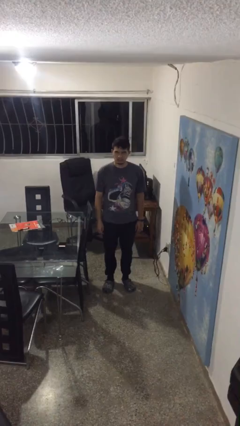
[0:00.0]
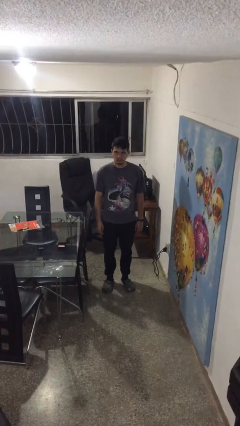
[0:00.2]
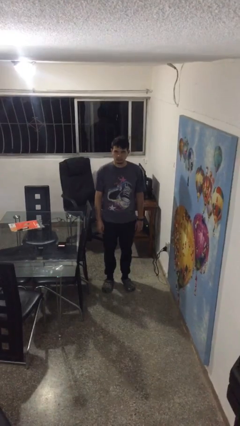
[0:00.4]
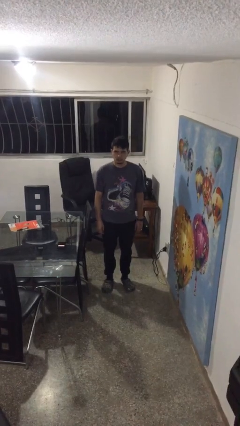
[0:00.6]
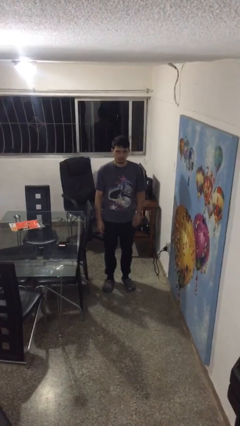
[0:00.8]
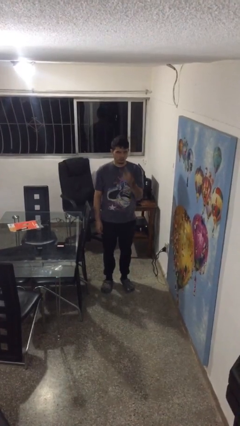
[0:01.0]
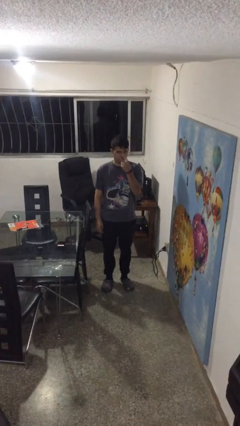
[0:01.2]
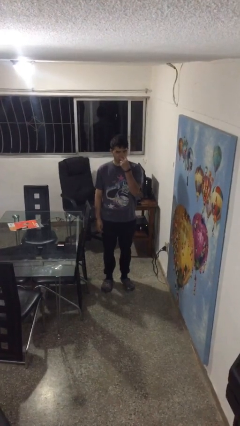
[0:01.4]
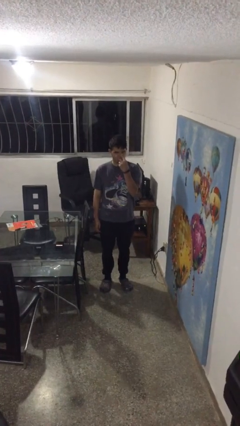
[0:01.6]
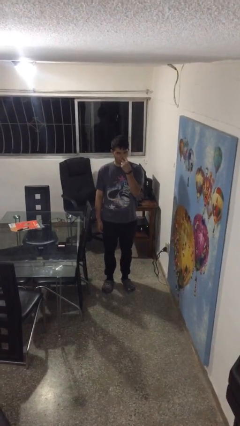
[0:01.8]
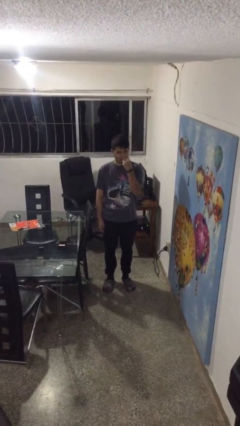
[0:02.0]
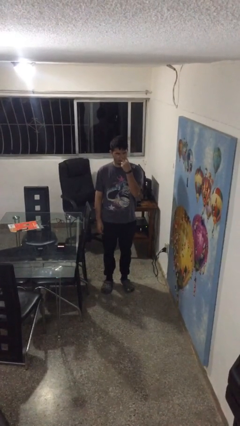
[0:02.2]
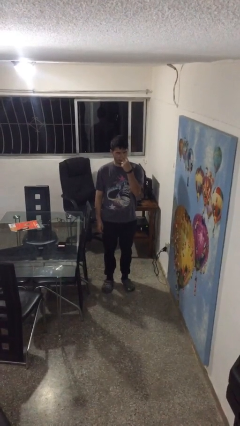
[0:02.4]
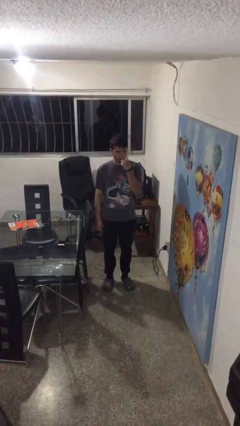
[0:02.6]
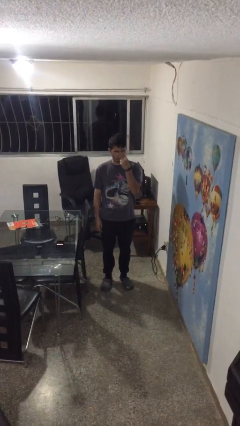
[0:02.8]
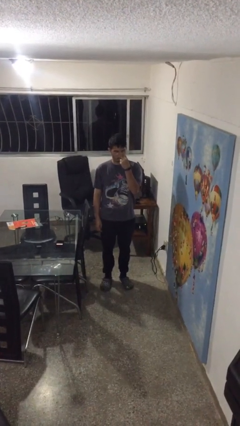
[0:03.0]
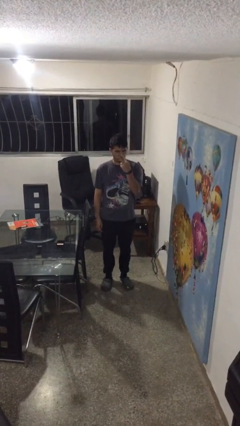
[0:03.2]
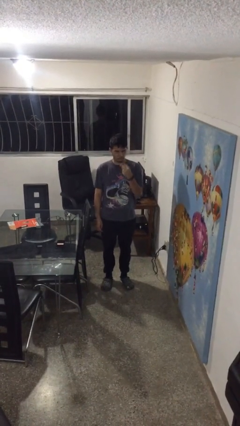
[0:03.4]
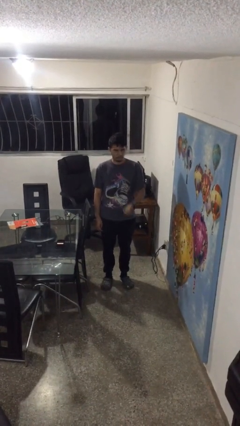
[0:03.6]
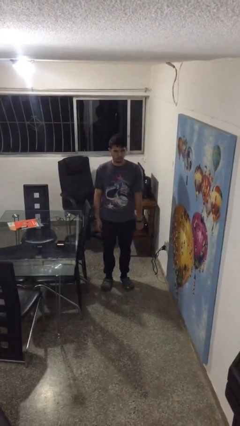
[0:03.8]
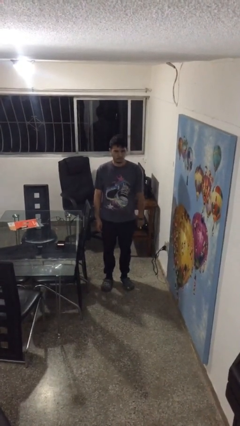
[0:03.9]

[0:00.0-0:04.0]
person gestures watch closely

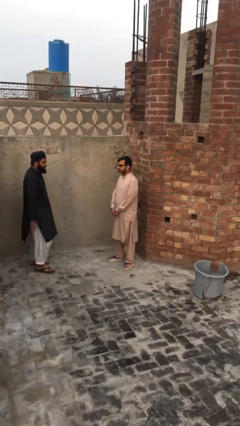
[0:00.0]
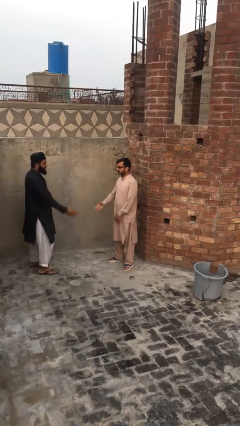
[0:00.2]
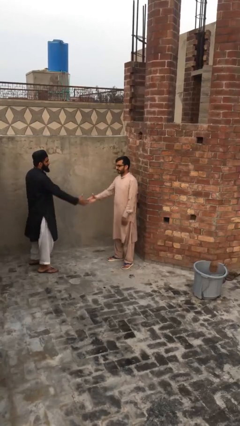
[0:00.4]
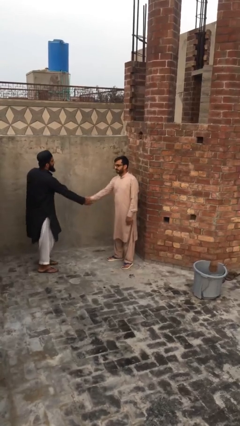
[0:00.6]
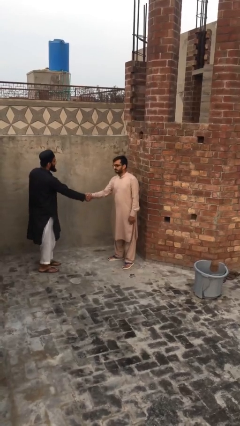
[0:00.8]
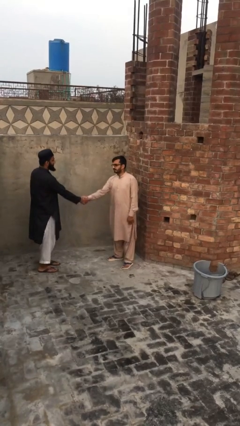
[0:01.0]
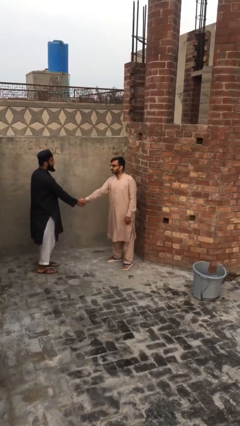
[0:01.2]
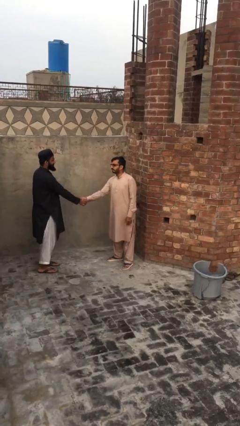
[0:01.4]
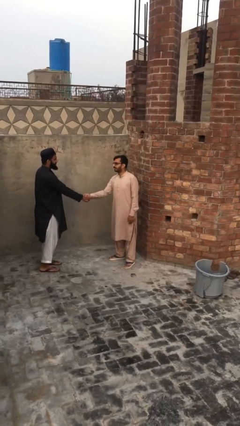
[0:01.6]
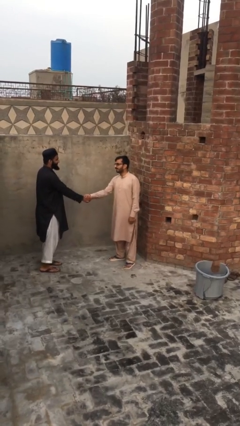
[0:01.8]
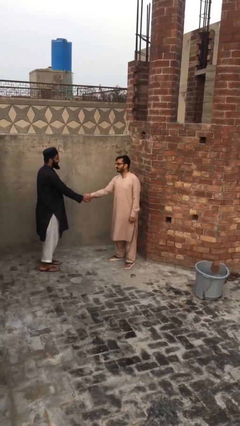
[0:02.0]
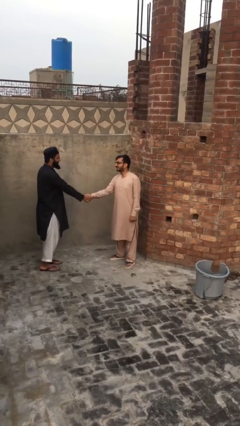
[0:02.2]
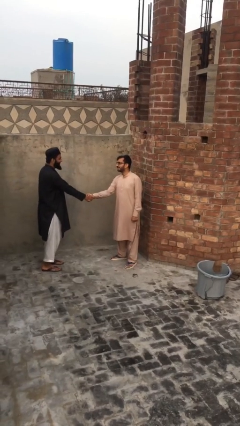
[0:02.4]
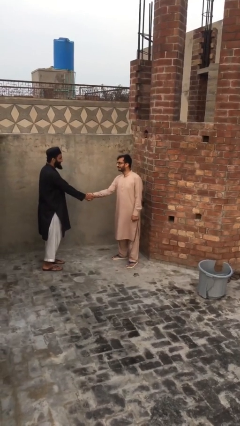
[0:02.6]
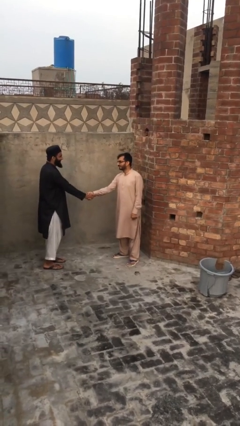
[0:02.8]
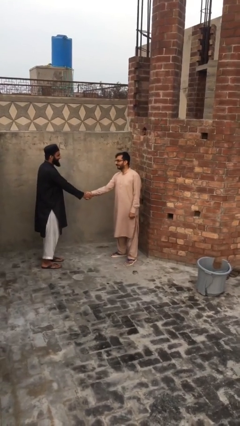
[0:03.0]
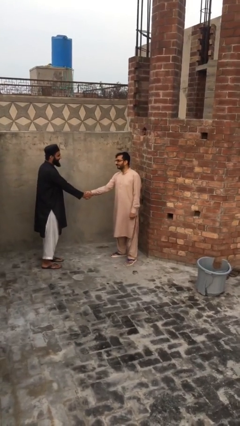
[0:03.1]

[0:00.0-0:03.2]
person shakes hand

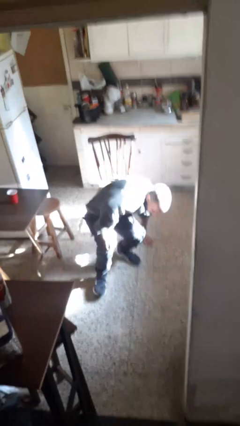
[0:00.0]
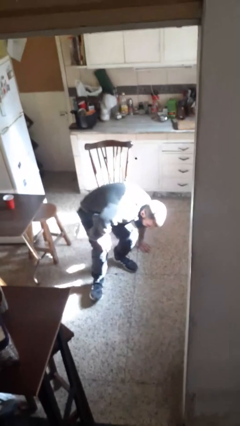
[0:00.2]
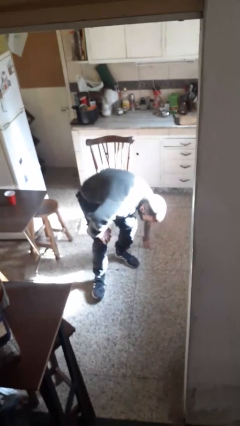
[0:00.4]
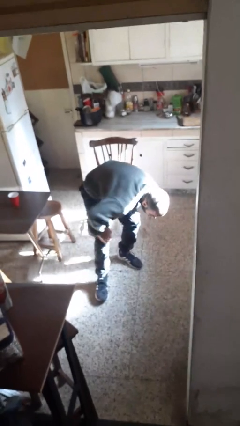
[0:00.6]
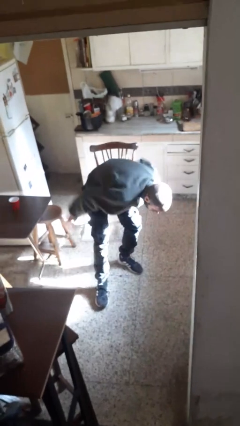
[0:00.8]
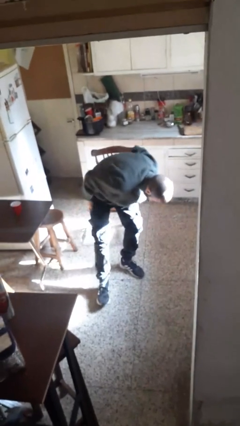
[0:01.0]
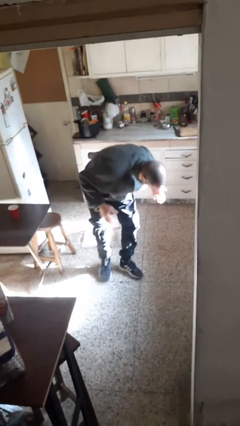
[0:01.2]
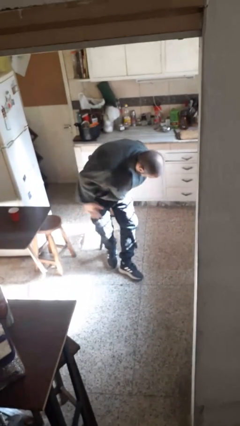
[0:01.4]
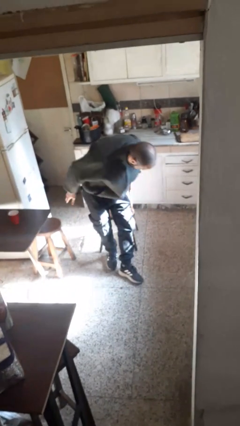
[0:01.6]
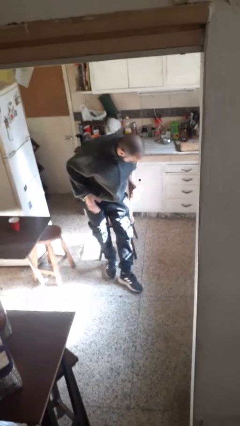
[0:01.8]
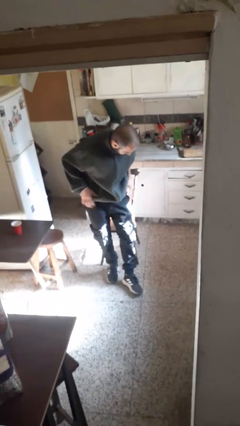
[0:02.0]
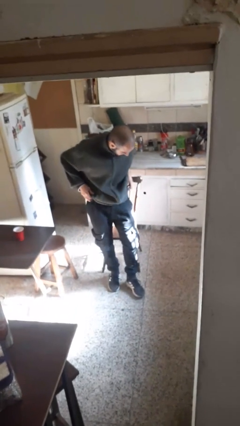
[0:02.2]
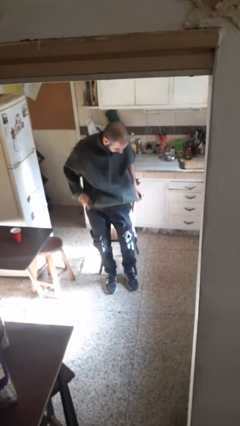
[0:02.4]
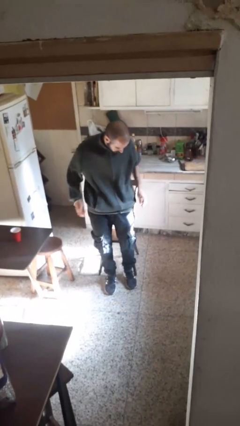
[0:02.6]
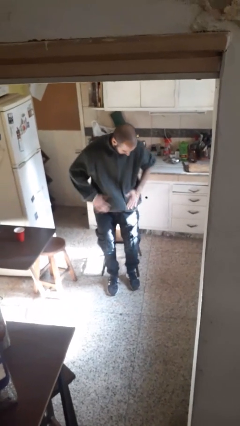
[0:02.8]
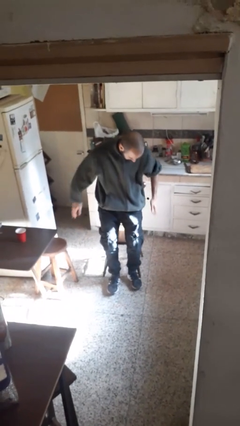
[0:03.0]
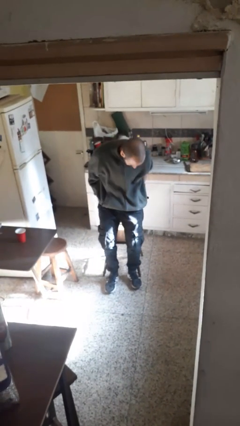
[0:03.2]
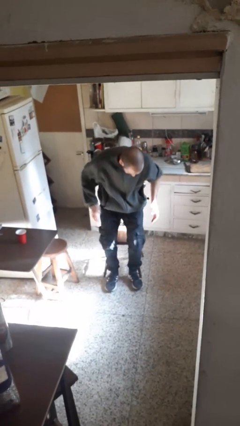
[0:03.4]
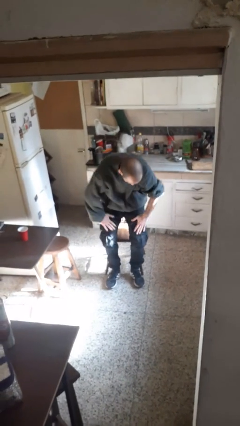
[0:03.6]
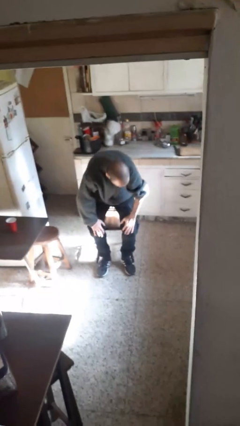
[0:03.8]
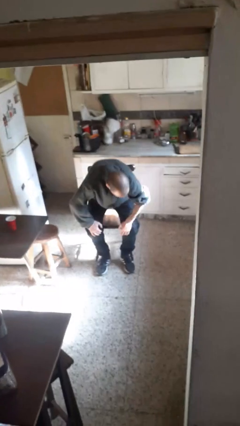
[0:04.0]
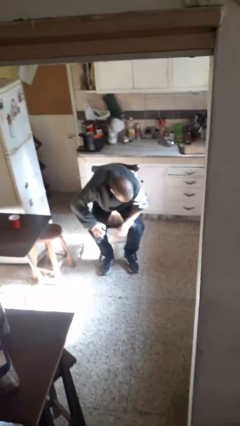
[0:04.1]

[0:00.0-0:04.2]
person stands up from floor

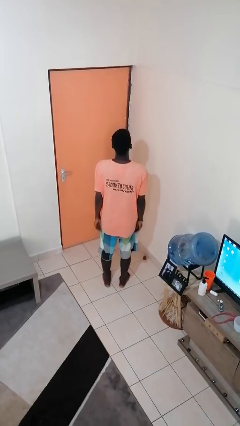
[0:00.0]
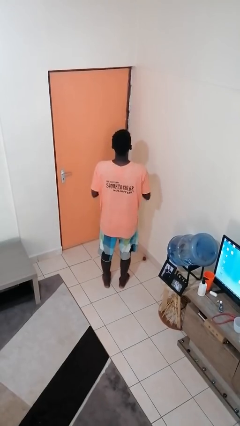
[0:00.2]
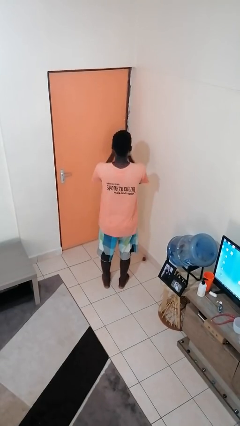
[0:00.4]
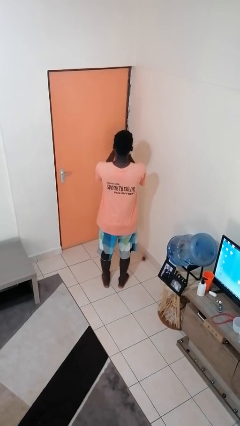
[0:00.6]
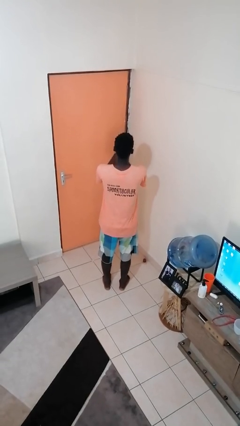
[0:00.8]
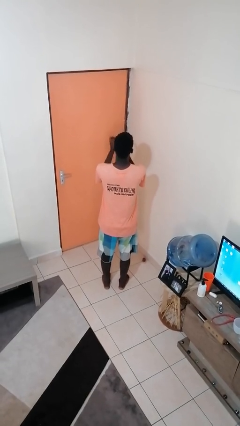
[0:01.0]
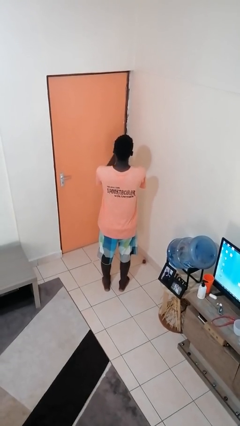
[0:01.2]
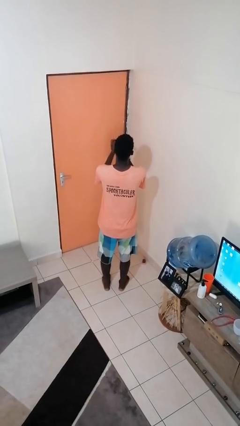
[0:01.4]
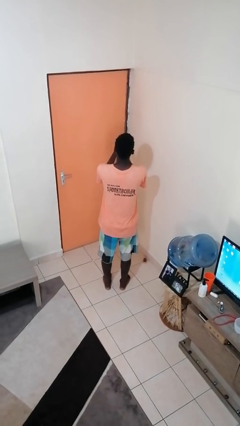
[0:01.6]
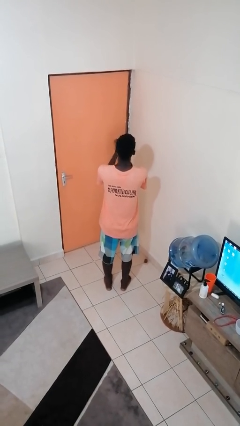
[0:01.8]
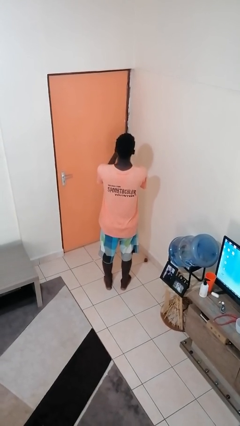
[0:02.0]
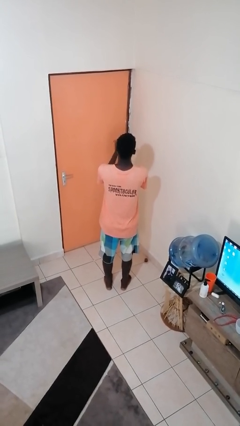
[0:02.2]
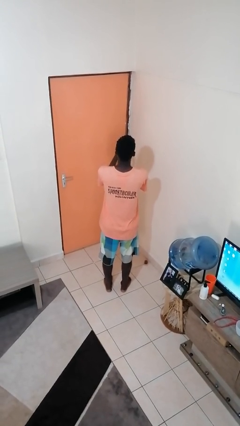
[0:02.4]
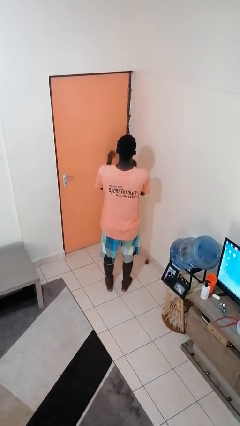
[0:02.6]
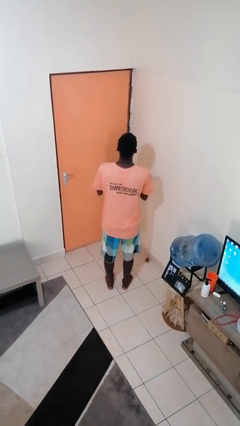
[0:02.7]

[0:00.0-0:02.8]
person claps hands

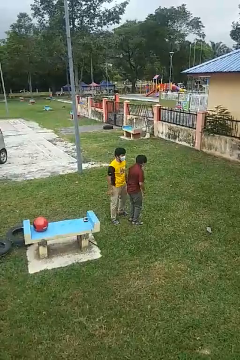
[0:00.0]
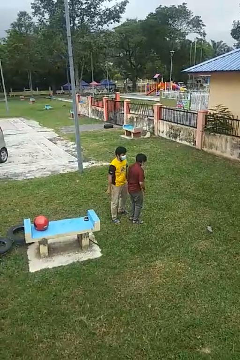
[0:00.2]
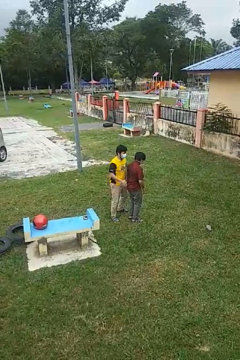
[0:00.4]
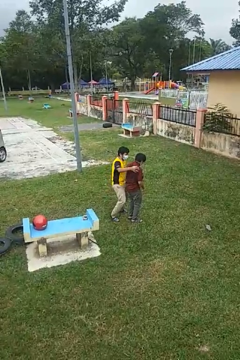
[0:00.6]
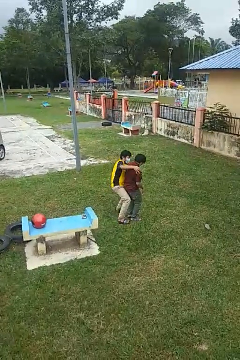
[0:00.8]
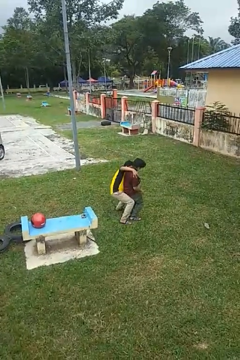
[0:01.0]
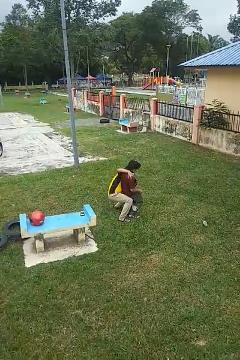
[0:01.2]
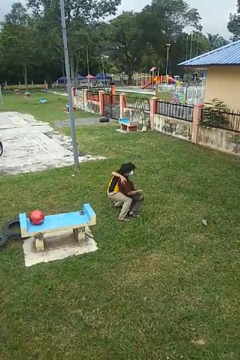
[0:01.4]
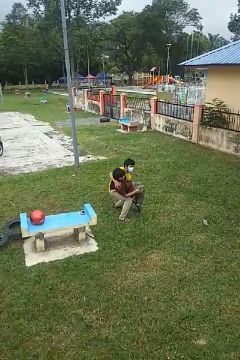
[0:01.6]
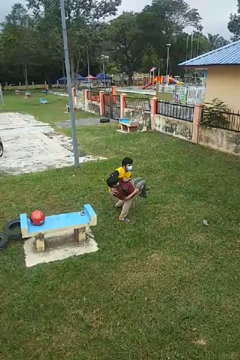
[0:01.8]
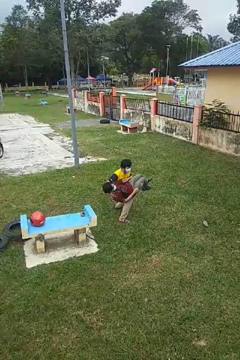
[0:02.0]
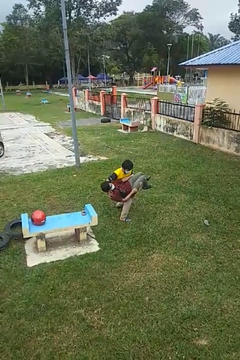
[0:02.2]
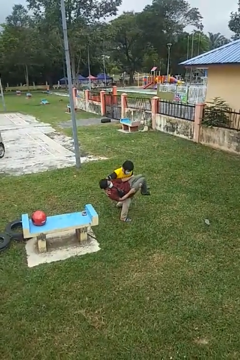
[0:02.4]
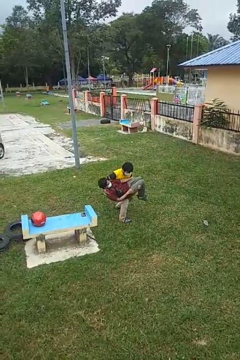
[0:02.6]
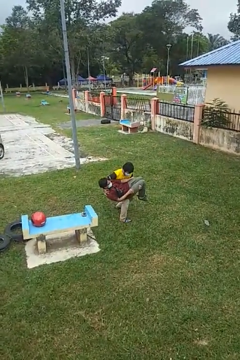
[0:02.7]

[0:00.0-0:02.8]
person picks up person

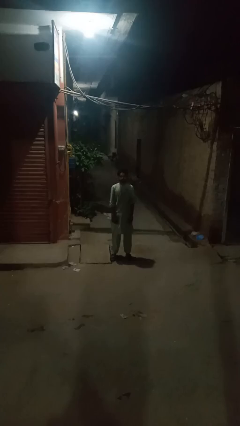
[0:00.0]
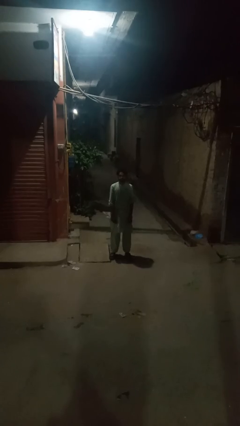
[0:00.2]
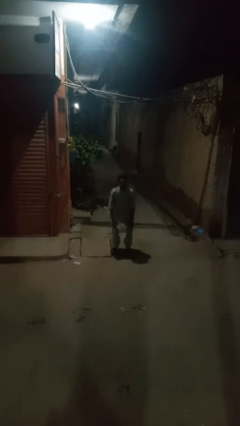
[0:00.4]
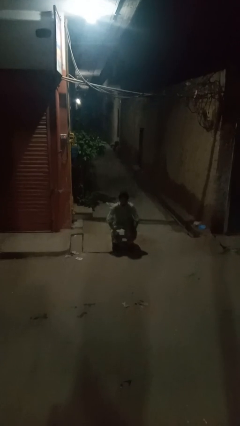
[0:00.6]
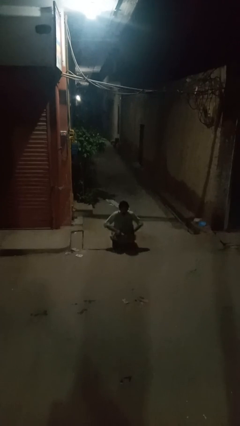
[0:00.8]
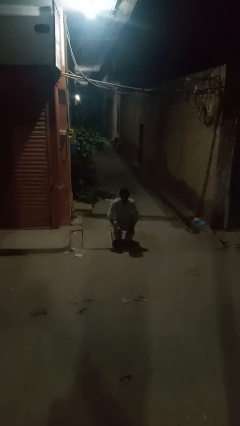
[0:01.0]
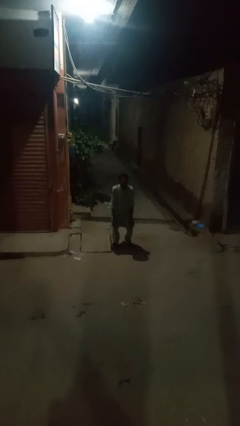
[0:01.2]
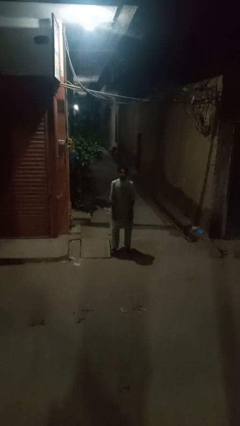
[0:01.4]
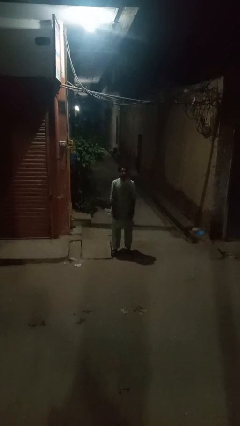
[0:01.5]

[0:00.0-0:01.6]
person exercises with situp
